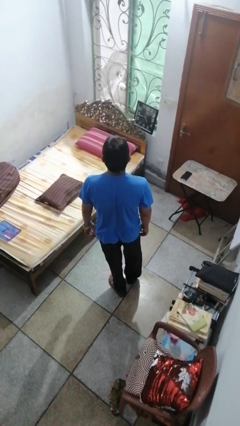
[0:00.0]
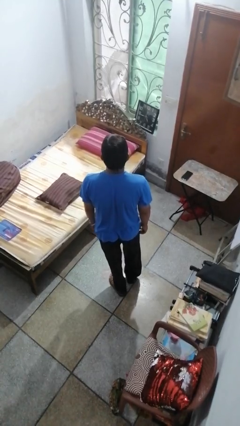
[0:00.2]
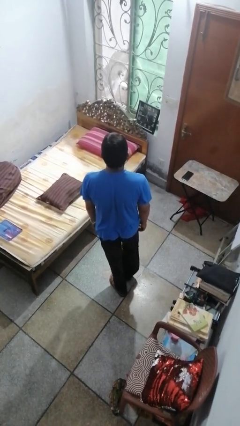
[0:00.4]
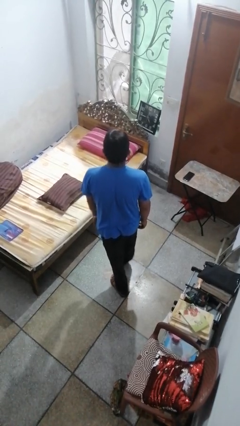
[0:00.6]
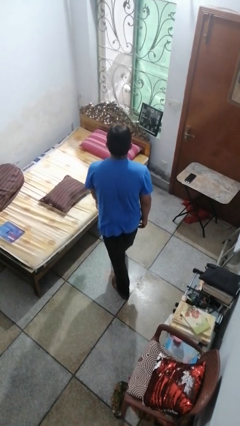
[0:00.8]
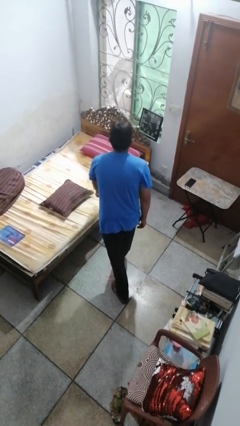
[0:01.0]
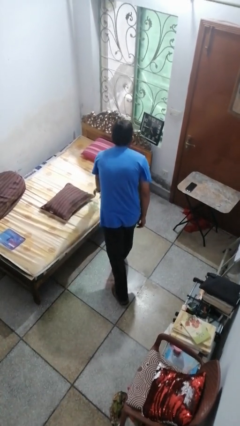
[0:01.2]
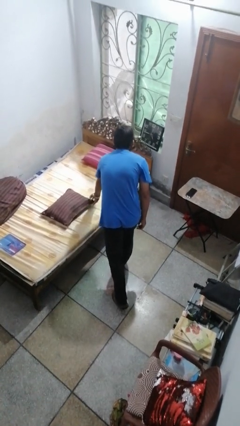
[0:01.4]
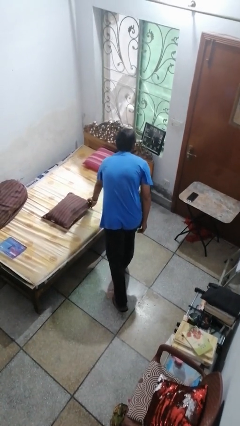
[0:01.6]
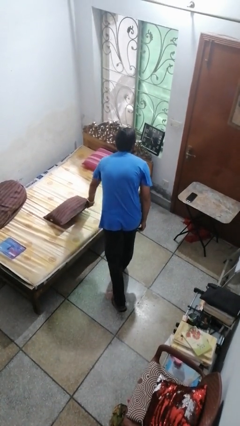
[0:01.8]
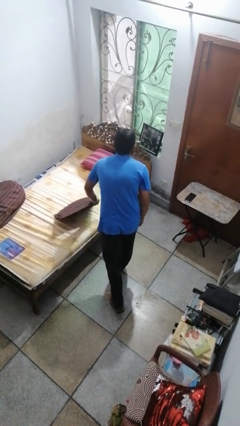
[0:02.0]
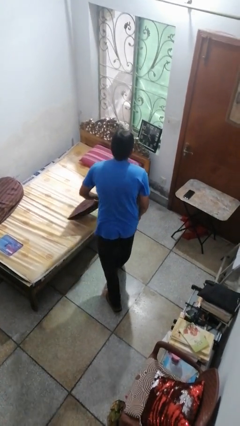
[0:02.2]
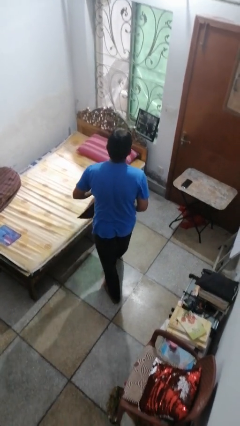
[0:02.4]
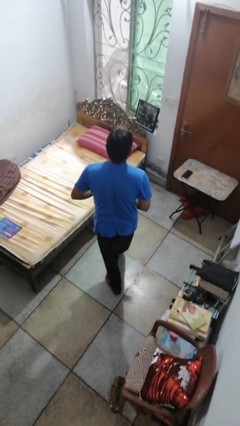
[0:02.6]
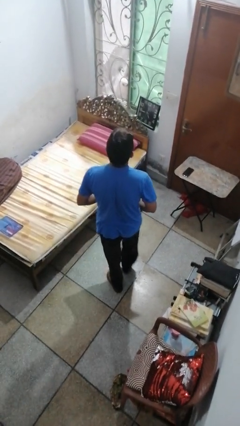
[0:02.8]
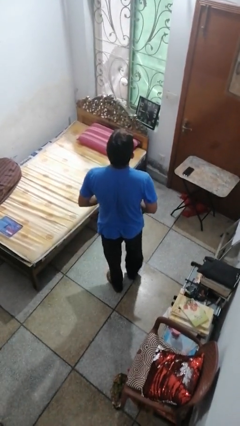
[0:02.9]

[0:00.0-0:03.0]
person picks up object from bed

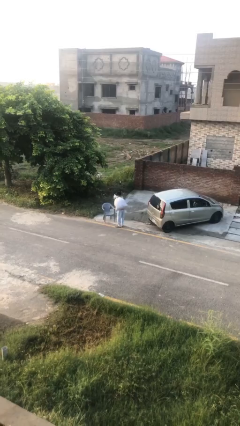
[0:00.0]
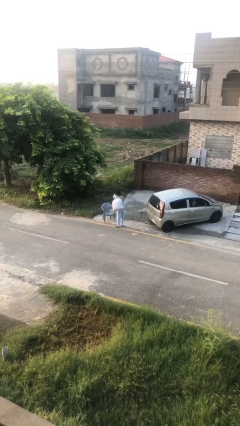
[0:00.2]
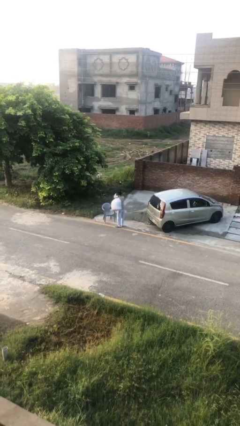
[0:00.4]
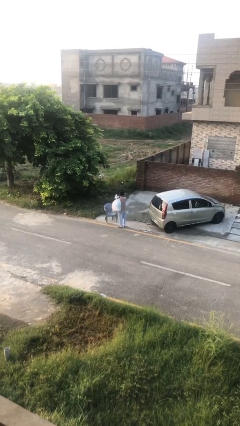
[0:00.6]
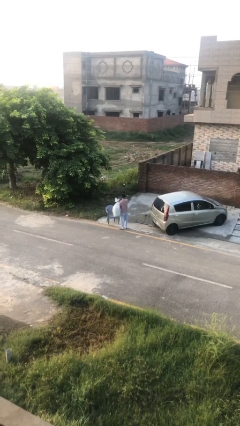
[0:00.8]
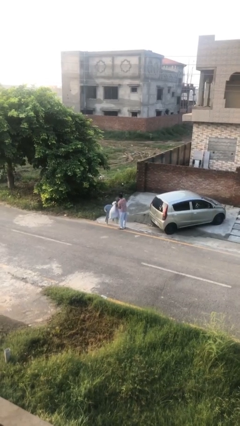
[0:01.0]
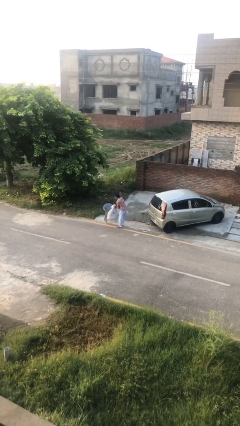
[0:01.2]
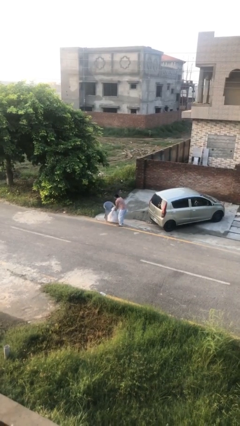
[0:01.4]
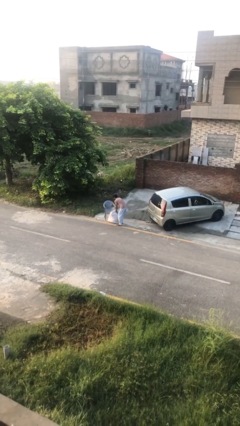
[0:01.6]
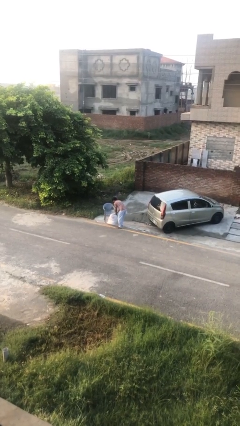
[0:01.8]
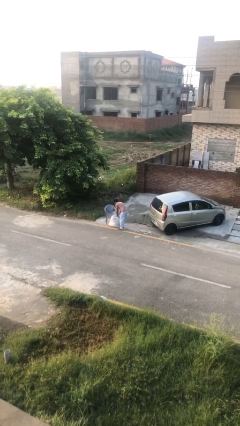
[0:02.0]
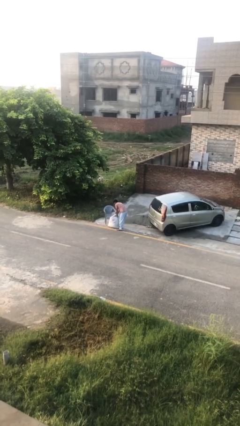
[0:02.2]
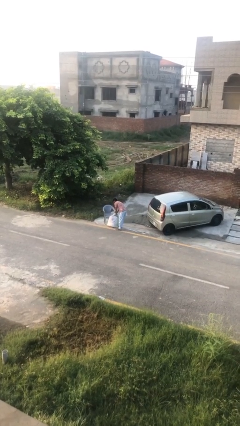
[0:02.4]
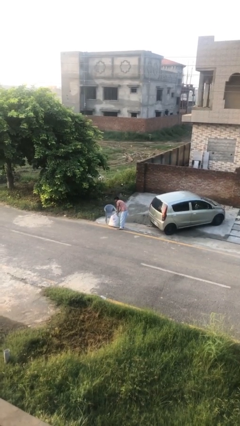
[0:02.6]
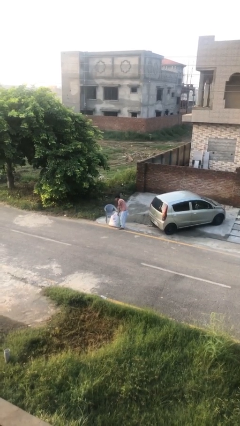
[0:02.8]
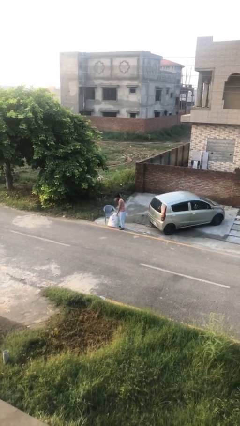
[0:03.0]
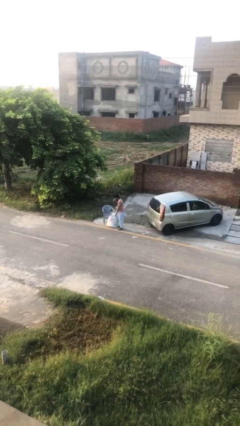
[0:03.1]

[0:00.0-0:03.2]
person puts down object on floor

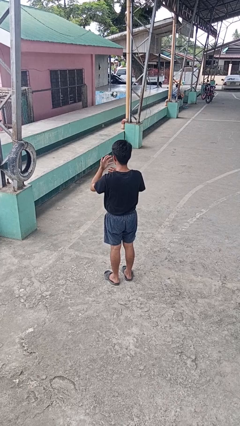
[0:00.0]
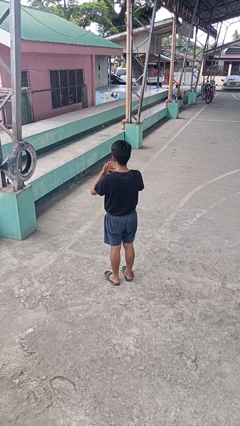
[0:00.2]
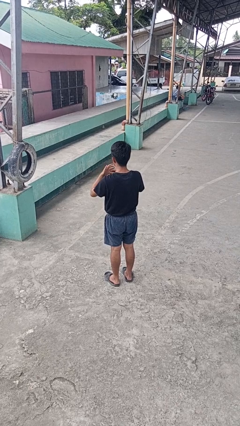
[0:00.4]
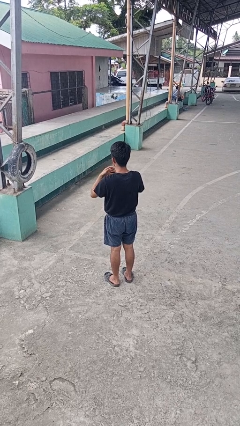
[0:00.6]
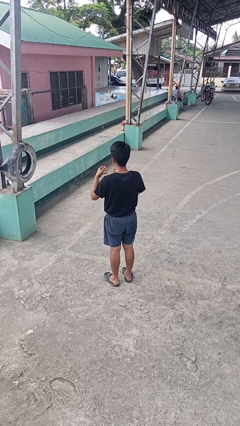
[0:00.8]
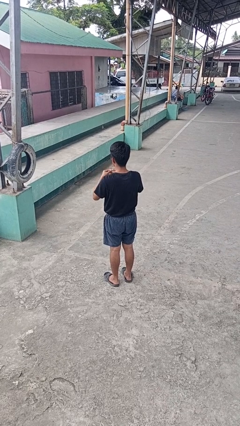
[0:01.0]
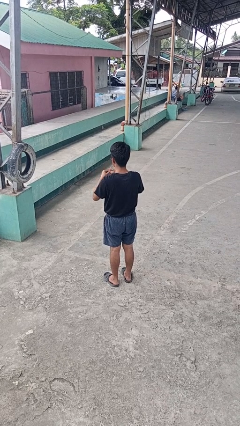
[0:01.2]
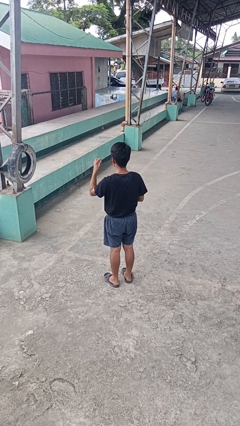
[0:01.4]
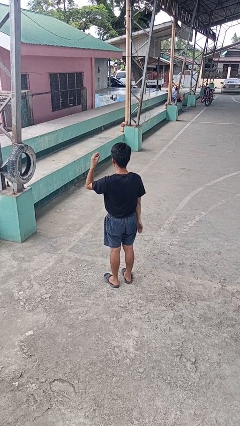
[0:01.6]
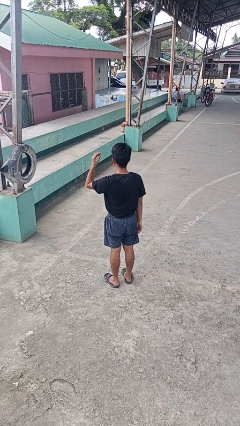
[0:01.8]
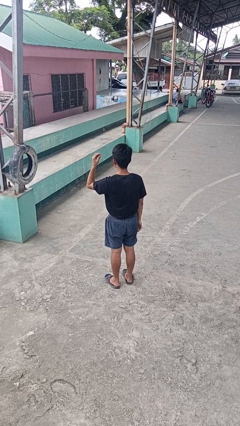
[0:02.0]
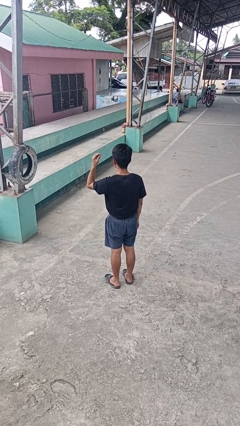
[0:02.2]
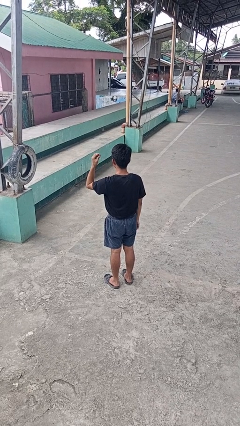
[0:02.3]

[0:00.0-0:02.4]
person takes off ring

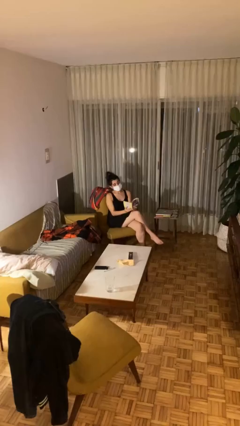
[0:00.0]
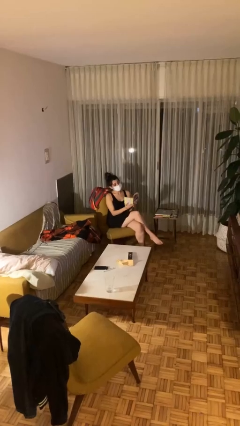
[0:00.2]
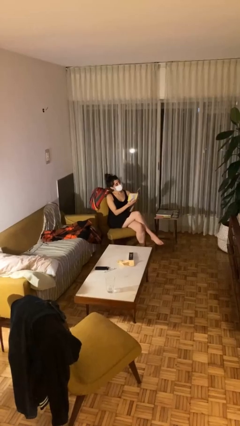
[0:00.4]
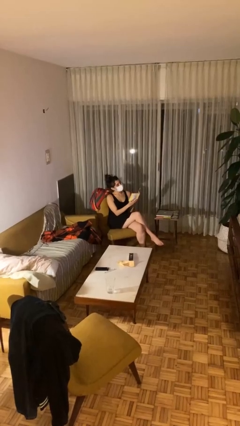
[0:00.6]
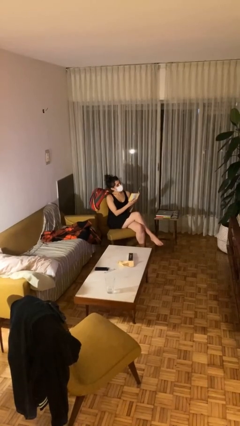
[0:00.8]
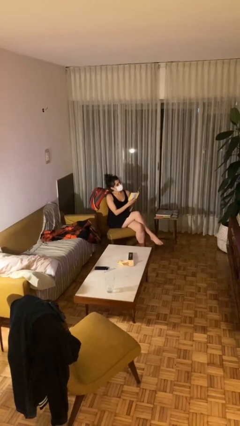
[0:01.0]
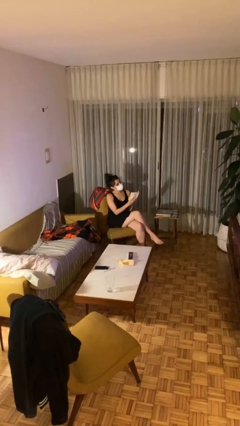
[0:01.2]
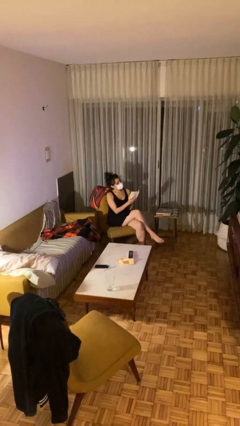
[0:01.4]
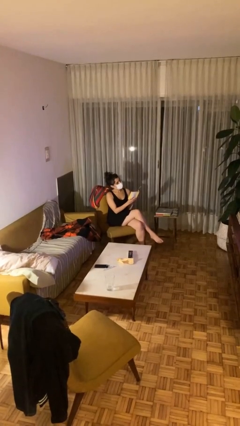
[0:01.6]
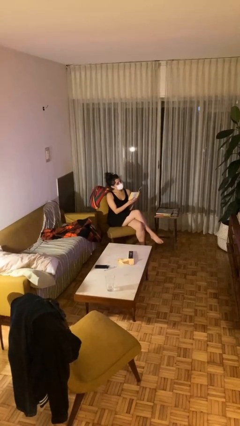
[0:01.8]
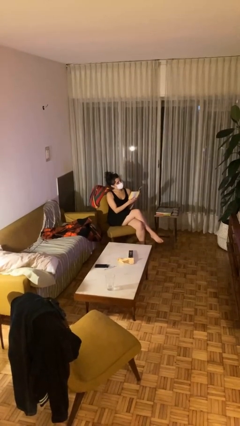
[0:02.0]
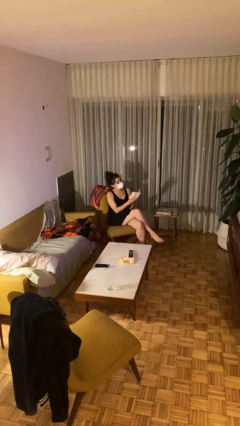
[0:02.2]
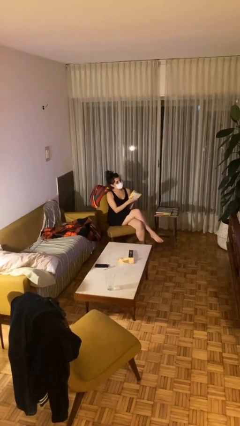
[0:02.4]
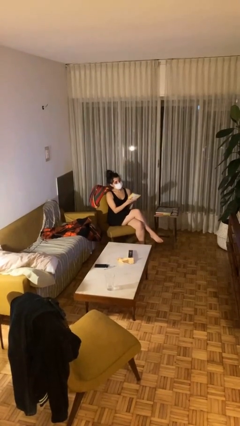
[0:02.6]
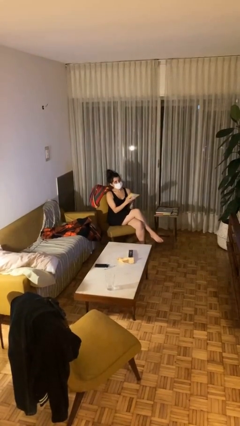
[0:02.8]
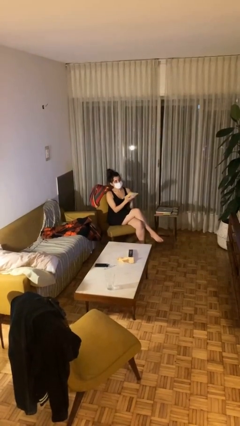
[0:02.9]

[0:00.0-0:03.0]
person reads document

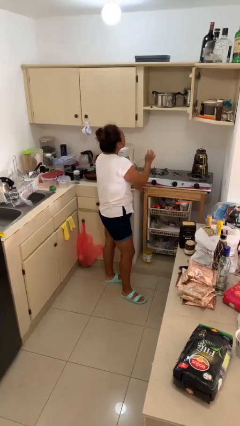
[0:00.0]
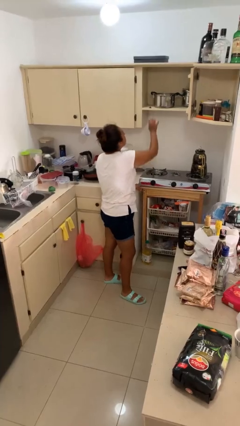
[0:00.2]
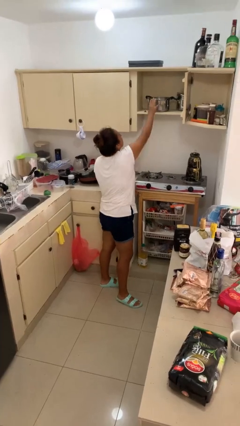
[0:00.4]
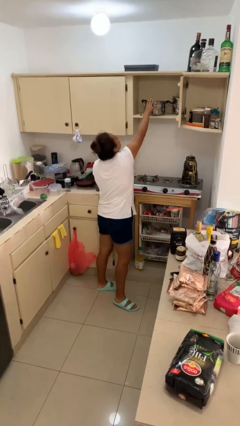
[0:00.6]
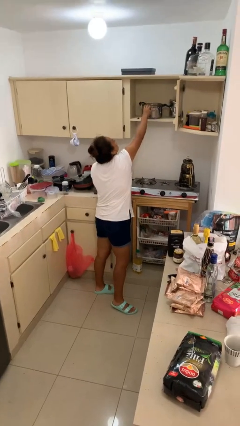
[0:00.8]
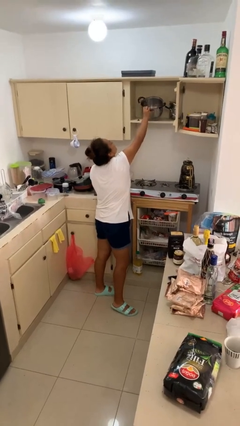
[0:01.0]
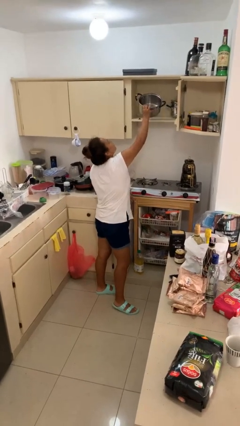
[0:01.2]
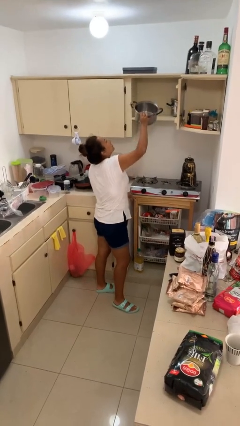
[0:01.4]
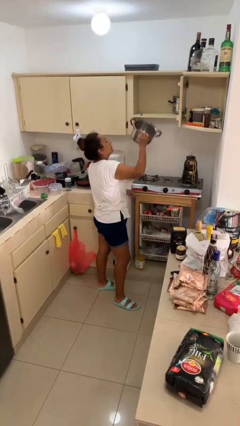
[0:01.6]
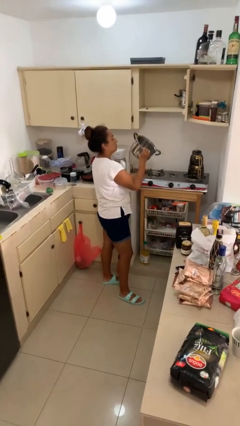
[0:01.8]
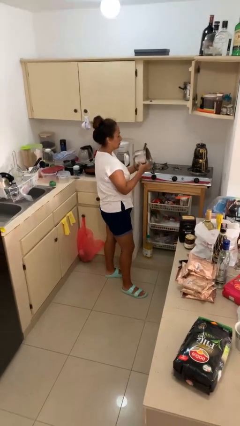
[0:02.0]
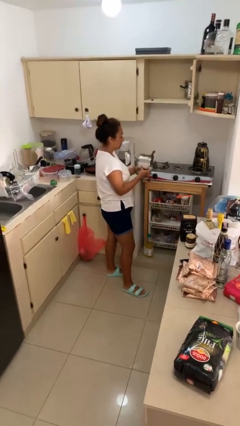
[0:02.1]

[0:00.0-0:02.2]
person picks up object from cabinet

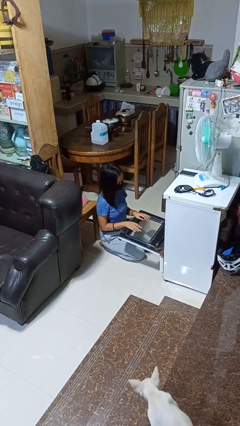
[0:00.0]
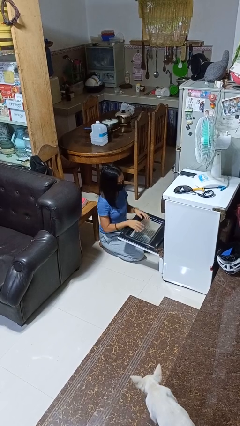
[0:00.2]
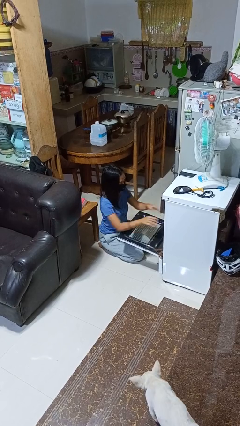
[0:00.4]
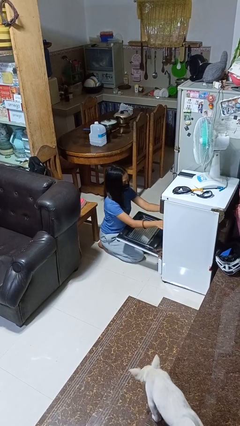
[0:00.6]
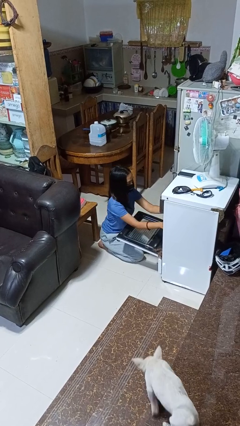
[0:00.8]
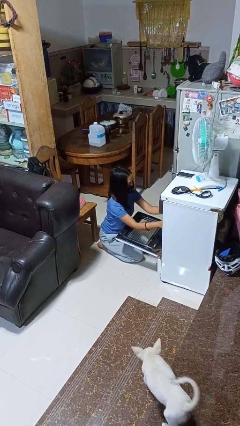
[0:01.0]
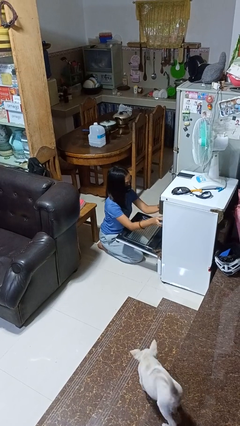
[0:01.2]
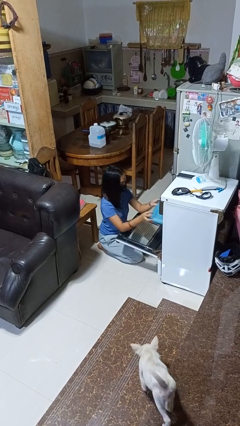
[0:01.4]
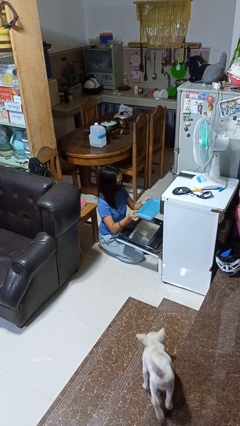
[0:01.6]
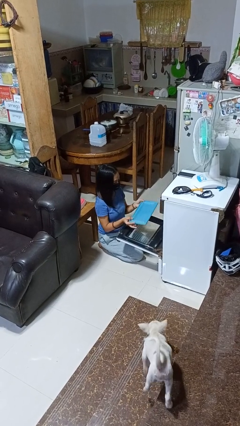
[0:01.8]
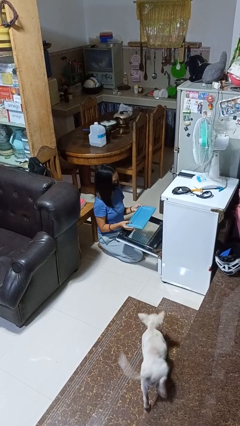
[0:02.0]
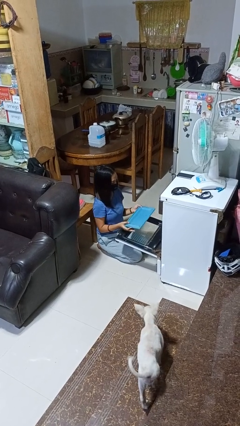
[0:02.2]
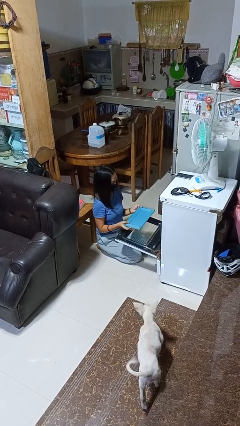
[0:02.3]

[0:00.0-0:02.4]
person takes object from oven

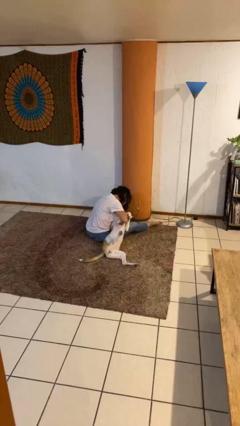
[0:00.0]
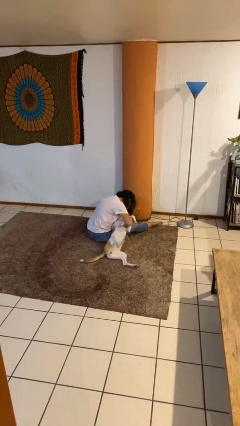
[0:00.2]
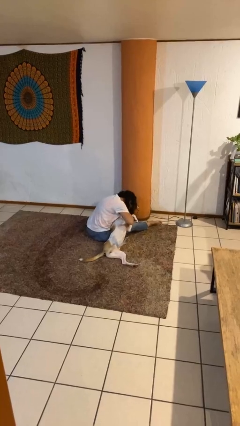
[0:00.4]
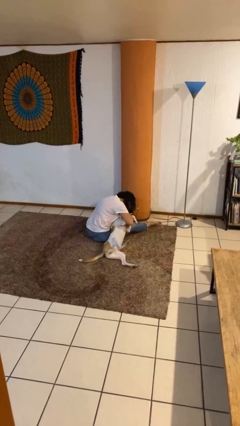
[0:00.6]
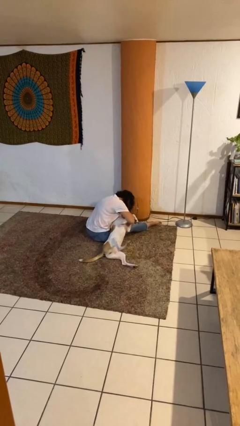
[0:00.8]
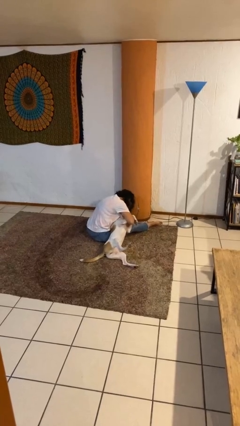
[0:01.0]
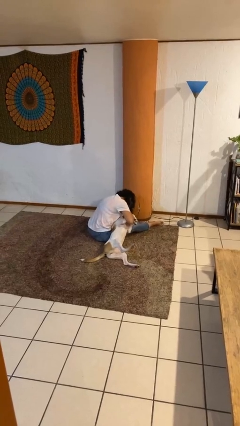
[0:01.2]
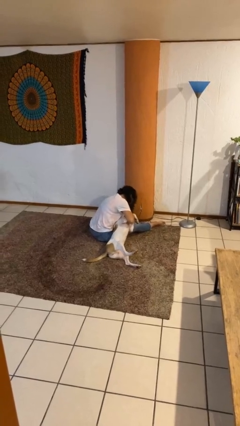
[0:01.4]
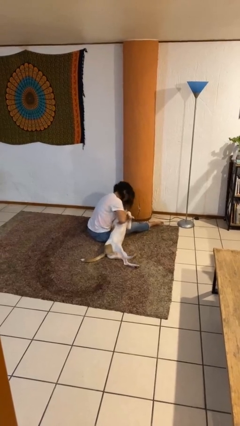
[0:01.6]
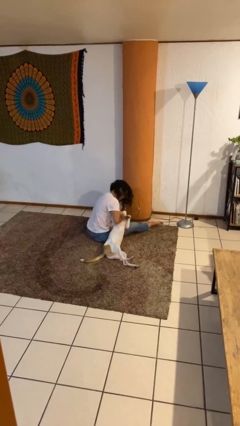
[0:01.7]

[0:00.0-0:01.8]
person hugs dog
